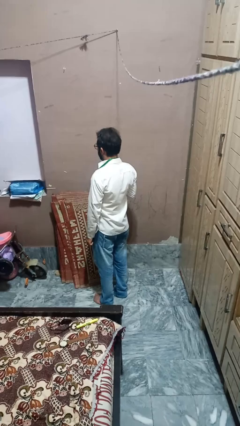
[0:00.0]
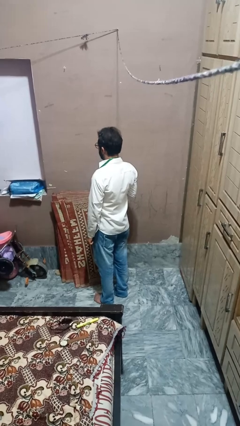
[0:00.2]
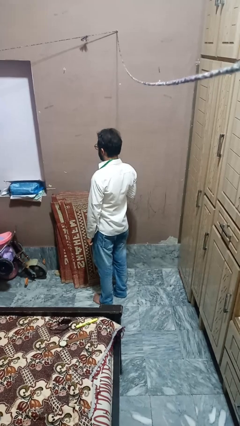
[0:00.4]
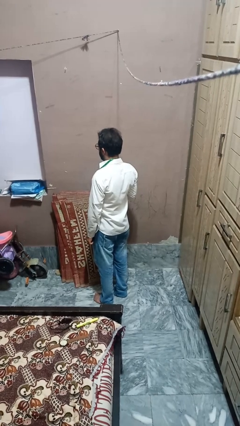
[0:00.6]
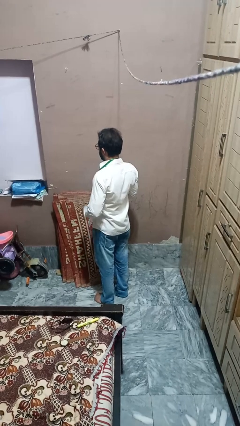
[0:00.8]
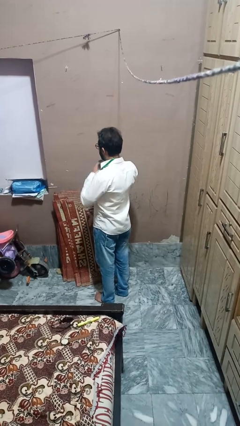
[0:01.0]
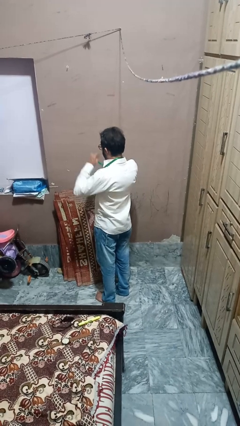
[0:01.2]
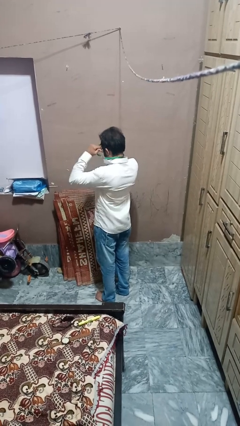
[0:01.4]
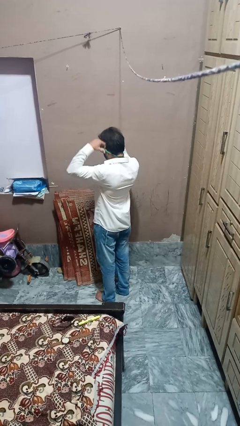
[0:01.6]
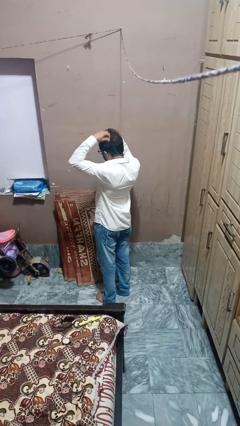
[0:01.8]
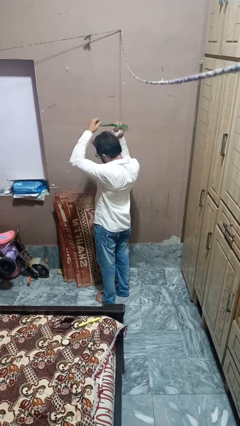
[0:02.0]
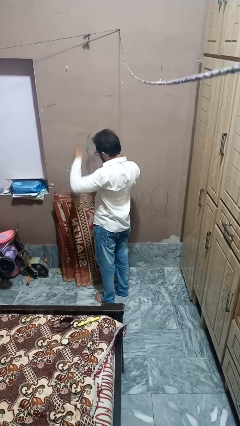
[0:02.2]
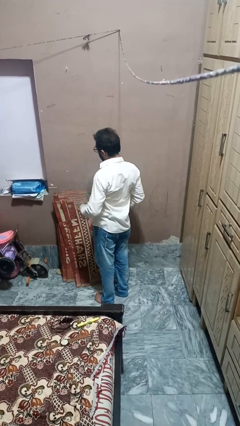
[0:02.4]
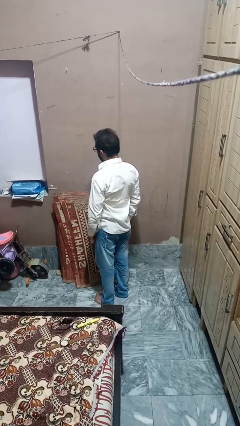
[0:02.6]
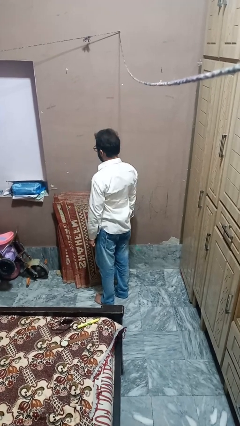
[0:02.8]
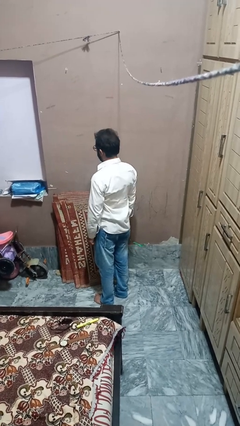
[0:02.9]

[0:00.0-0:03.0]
person takes off necklace

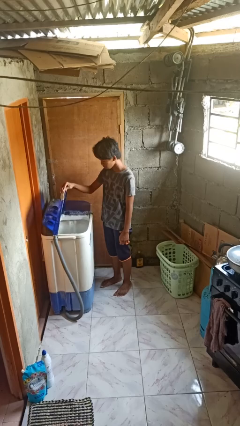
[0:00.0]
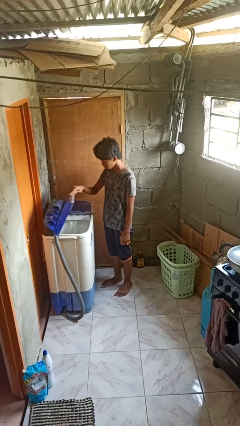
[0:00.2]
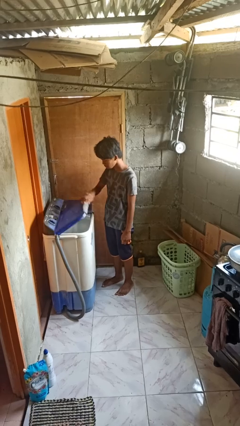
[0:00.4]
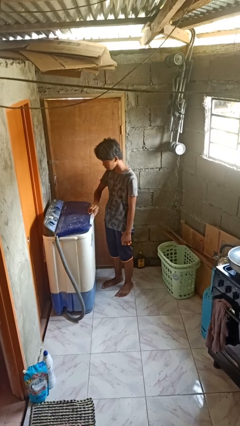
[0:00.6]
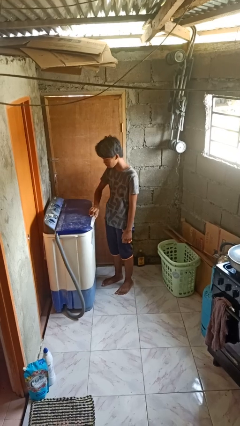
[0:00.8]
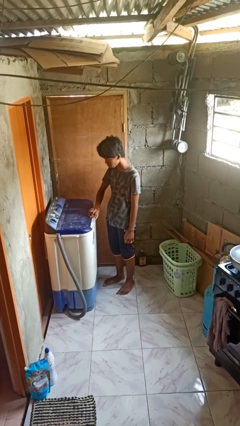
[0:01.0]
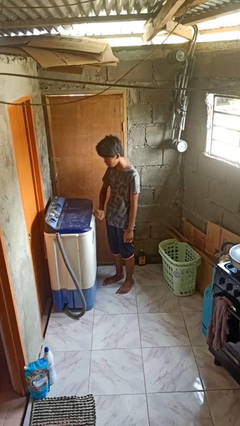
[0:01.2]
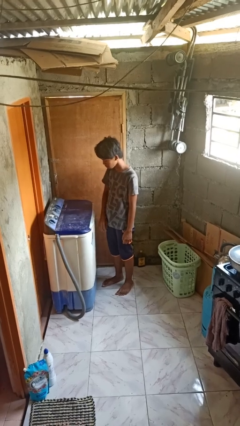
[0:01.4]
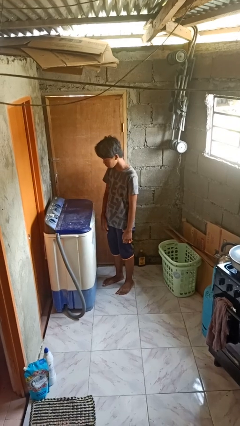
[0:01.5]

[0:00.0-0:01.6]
person closes clothes washer

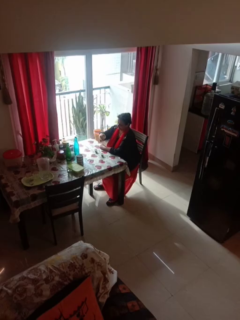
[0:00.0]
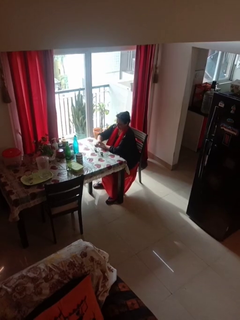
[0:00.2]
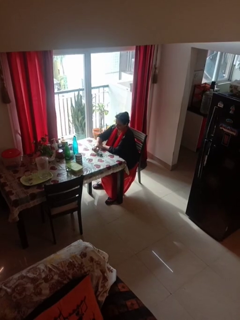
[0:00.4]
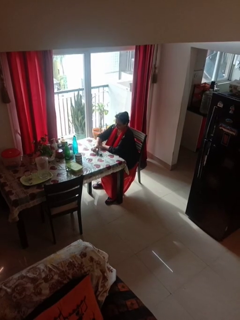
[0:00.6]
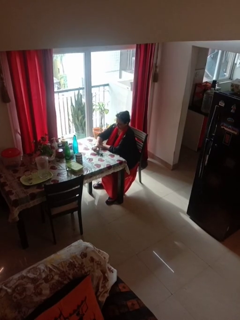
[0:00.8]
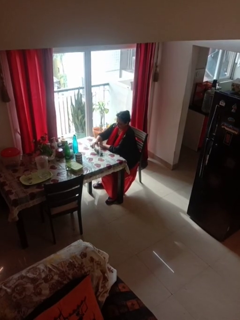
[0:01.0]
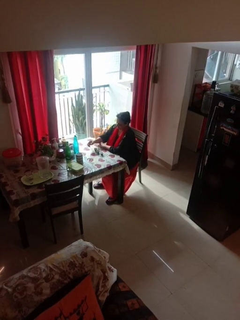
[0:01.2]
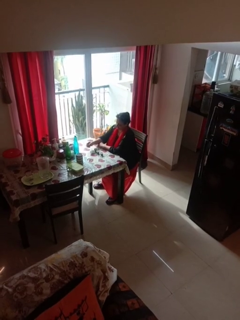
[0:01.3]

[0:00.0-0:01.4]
person puts down object on table

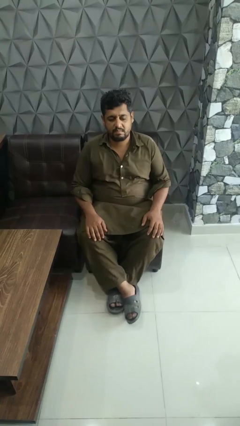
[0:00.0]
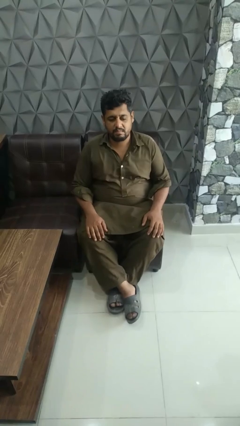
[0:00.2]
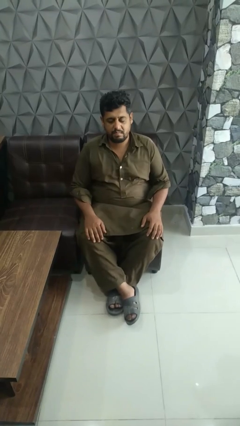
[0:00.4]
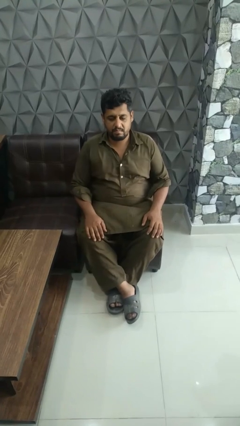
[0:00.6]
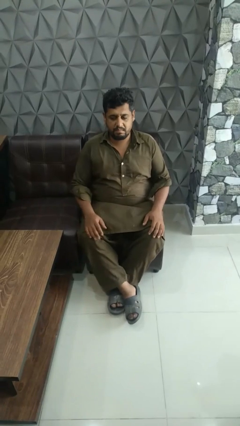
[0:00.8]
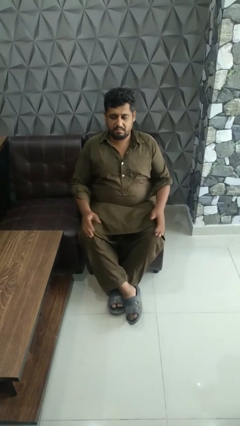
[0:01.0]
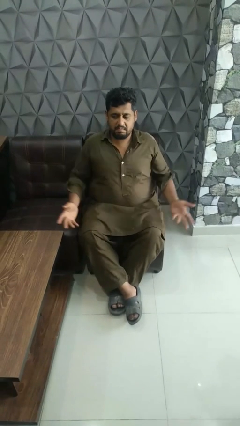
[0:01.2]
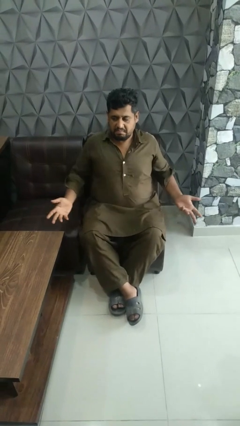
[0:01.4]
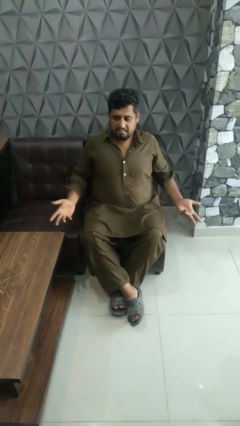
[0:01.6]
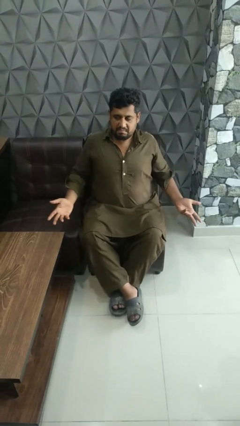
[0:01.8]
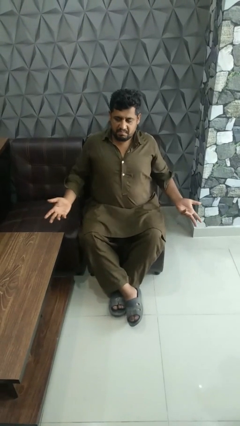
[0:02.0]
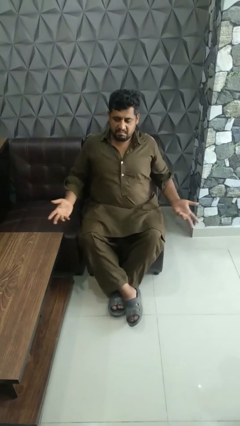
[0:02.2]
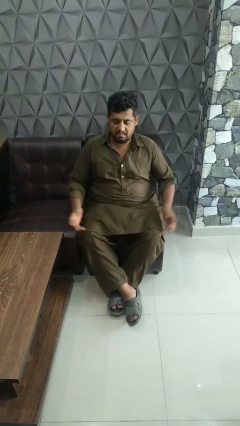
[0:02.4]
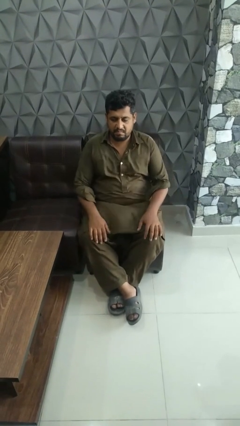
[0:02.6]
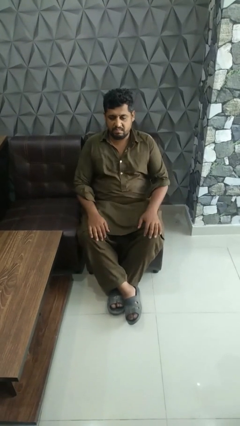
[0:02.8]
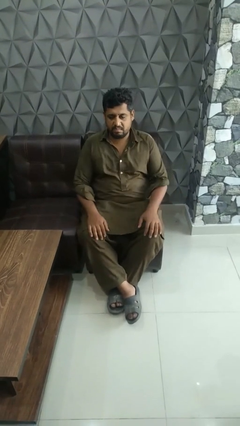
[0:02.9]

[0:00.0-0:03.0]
person shrugs

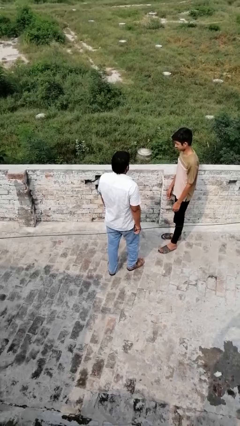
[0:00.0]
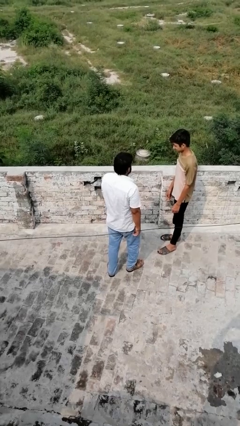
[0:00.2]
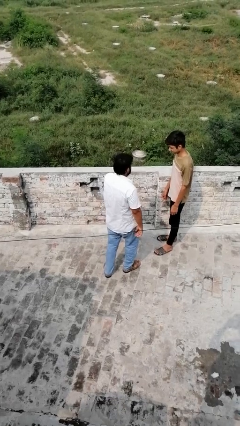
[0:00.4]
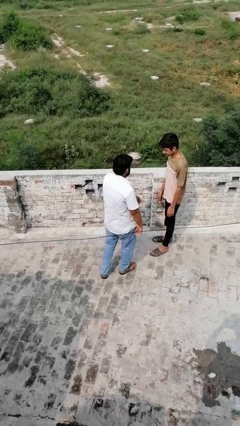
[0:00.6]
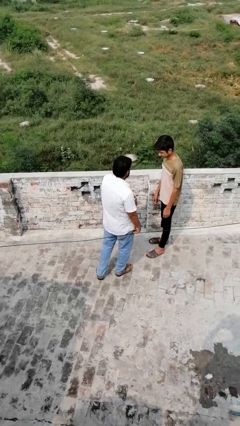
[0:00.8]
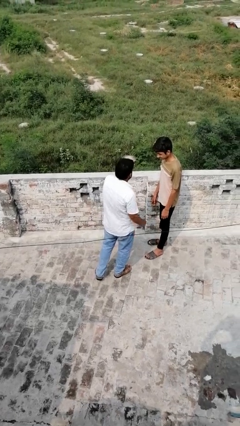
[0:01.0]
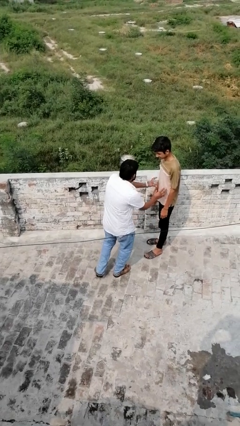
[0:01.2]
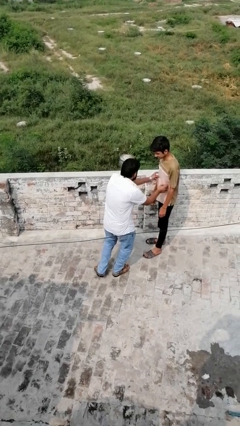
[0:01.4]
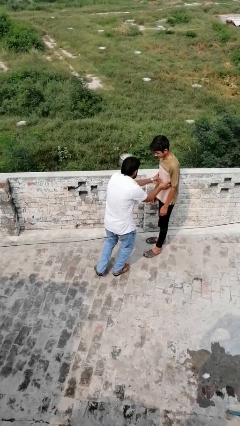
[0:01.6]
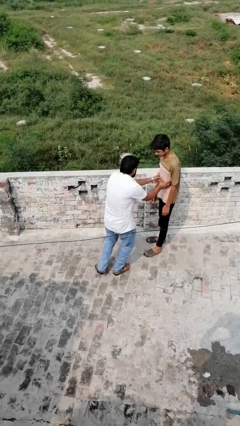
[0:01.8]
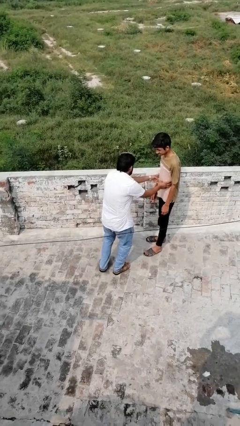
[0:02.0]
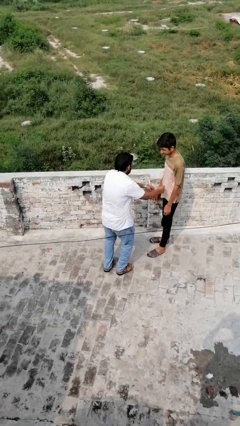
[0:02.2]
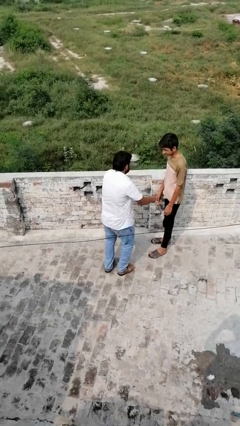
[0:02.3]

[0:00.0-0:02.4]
person tickles person

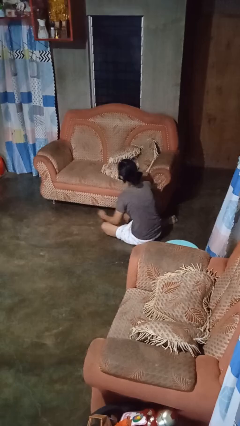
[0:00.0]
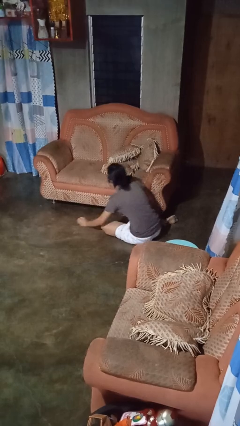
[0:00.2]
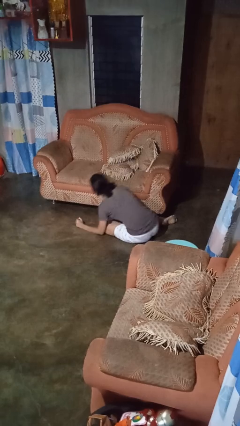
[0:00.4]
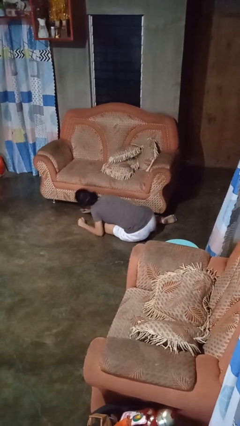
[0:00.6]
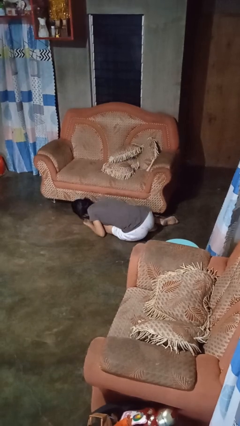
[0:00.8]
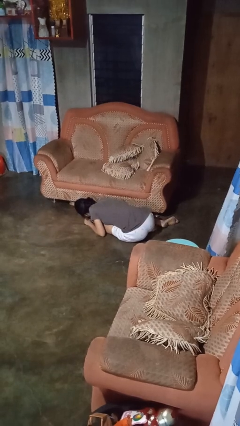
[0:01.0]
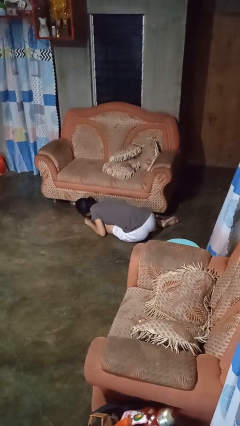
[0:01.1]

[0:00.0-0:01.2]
person searches under couch

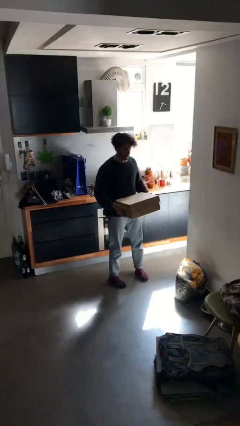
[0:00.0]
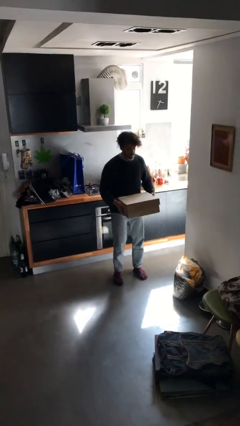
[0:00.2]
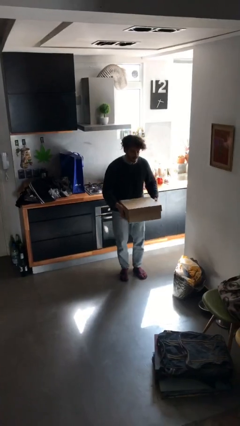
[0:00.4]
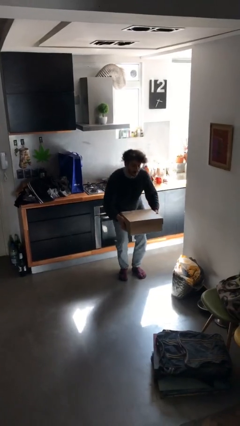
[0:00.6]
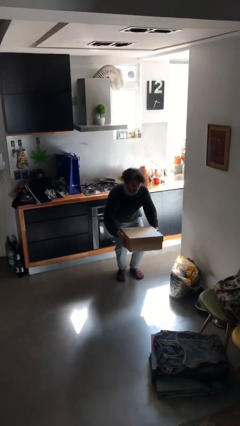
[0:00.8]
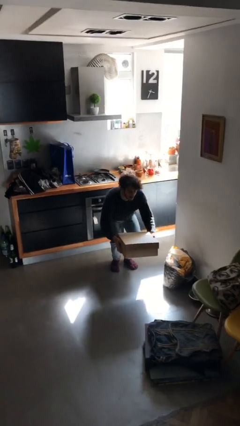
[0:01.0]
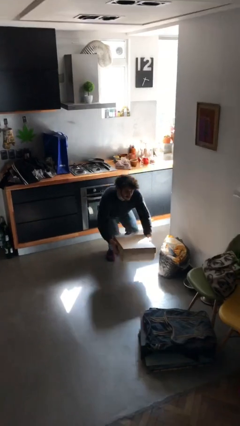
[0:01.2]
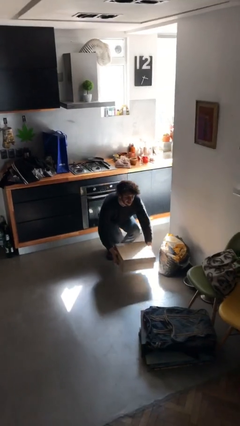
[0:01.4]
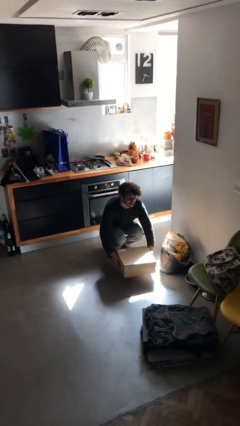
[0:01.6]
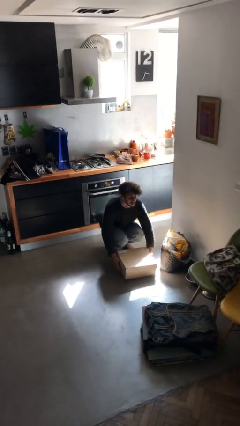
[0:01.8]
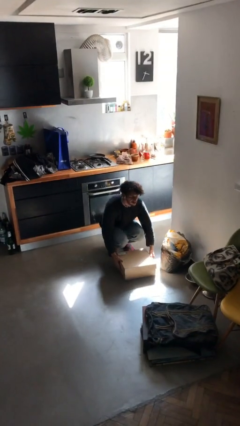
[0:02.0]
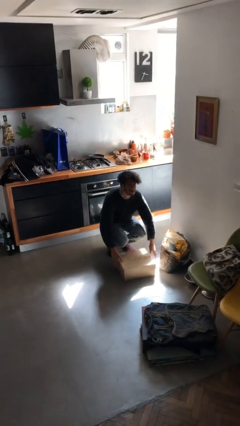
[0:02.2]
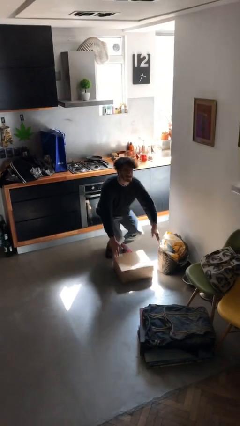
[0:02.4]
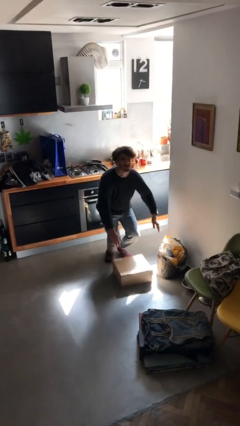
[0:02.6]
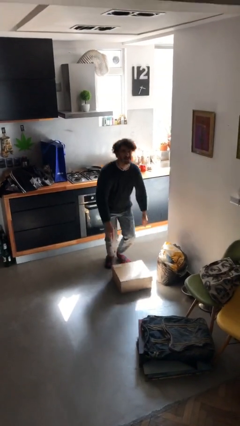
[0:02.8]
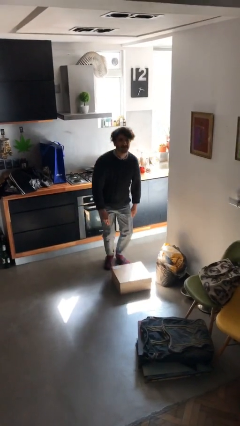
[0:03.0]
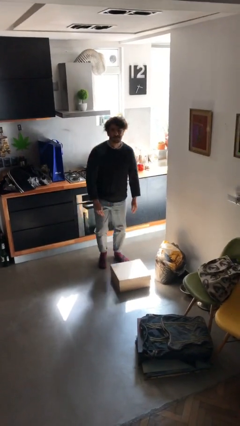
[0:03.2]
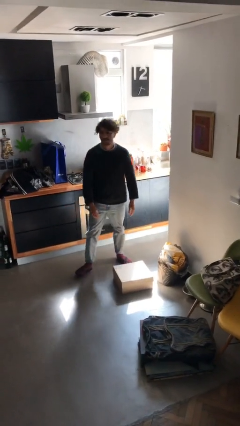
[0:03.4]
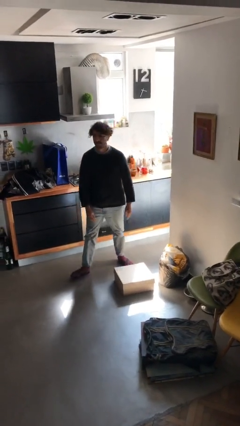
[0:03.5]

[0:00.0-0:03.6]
person puts down object on floor

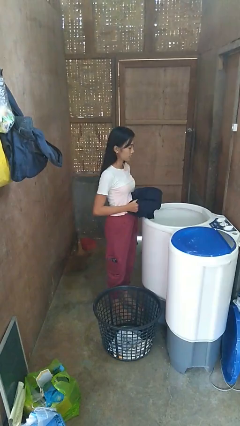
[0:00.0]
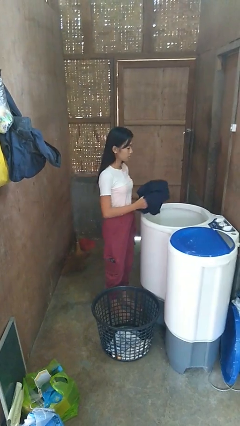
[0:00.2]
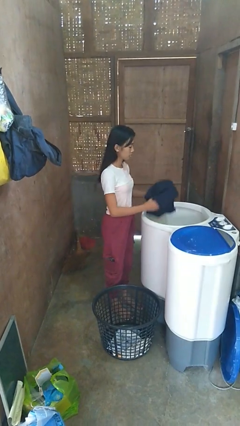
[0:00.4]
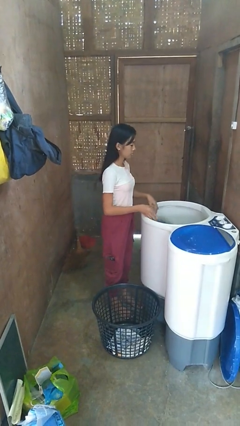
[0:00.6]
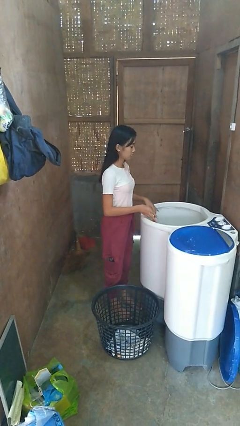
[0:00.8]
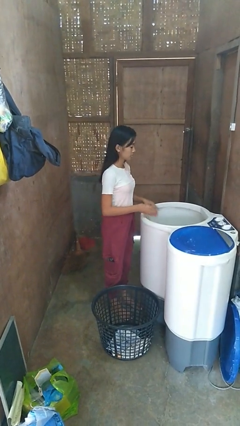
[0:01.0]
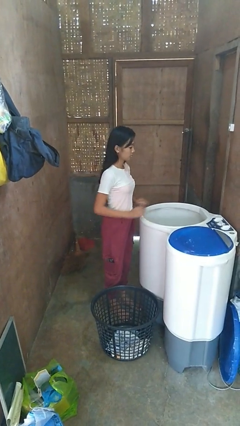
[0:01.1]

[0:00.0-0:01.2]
person loads clotheswasher

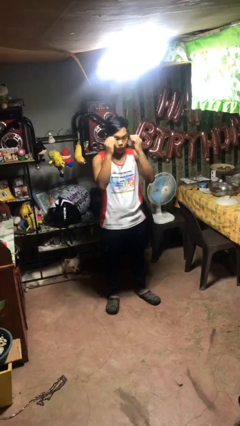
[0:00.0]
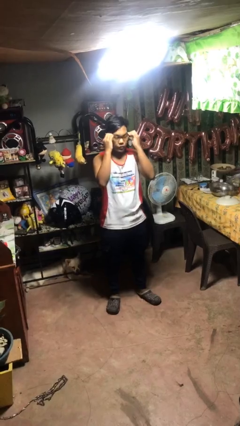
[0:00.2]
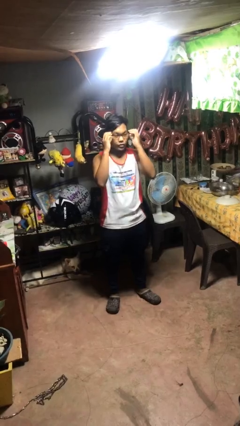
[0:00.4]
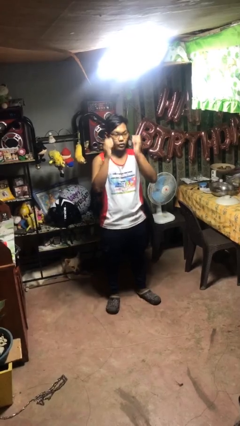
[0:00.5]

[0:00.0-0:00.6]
person puts on glasses
